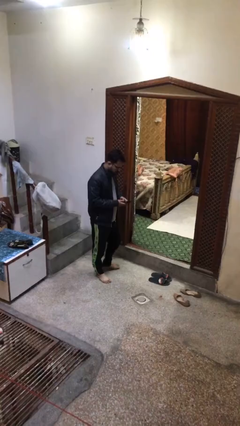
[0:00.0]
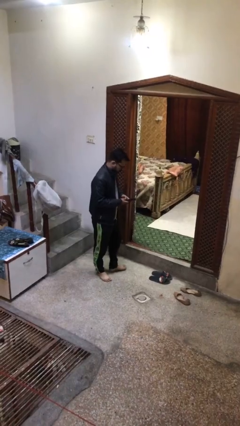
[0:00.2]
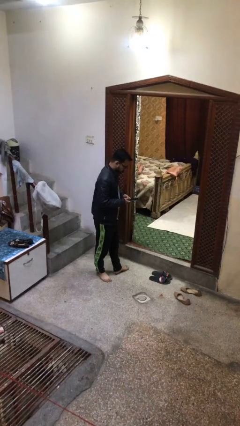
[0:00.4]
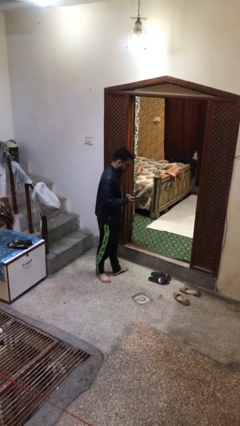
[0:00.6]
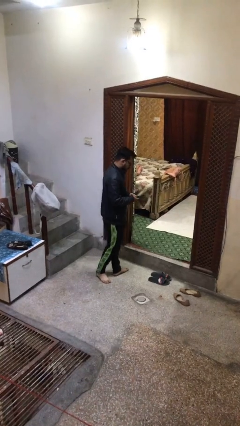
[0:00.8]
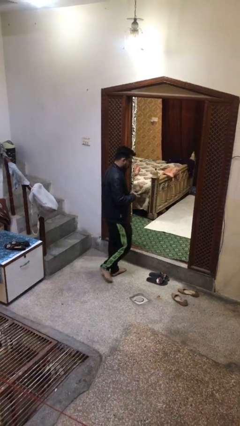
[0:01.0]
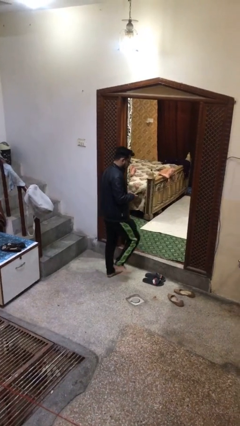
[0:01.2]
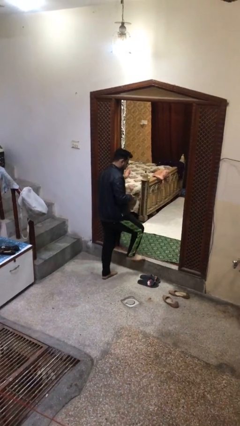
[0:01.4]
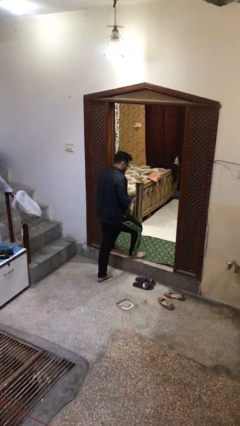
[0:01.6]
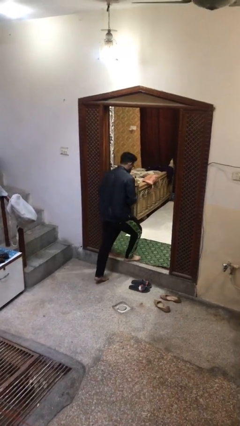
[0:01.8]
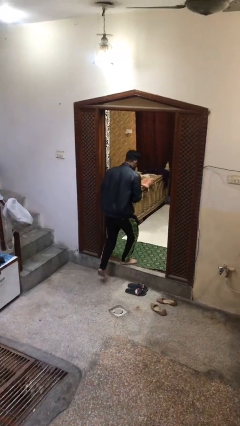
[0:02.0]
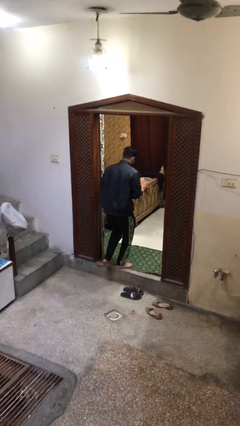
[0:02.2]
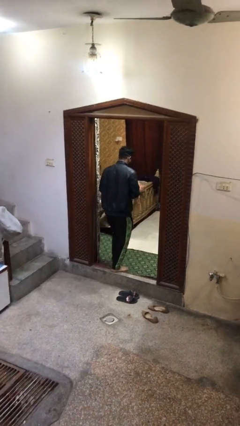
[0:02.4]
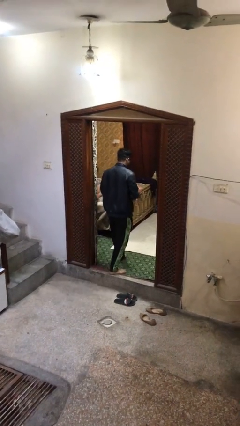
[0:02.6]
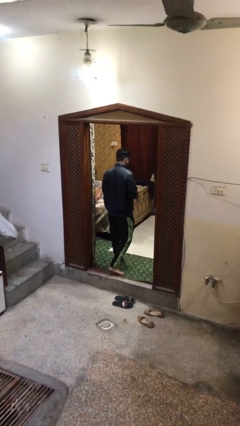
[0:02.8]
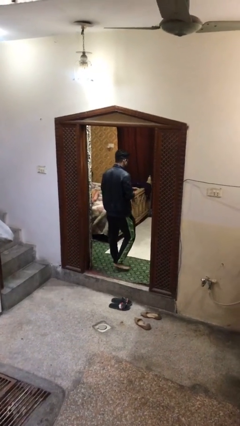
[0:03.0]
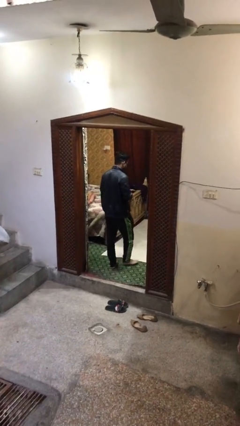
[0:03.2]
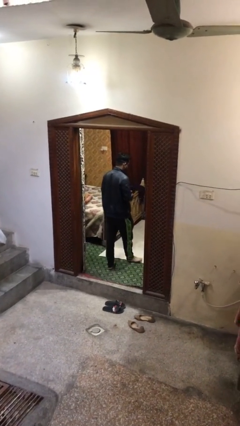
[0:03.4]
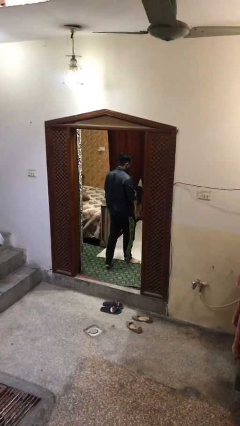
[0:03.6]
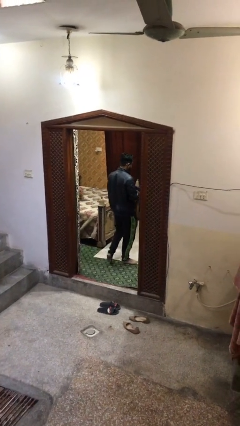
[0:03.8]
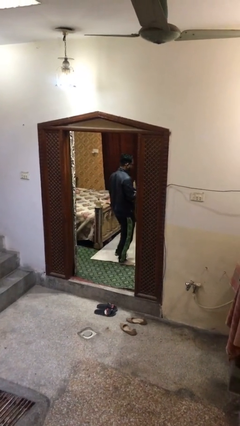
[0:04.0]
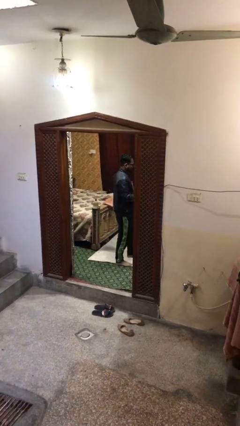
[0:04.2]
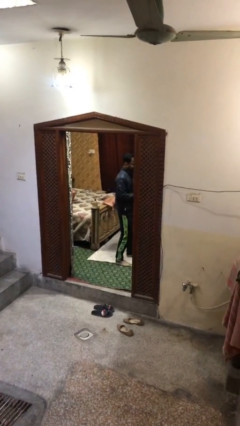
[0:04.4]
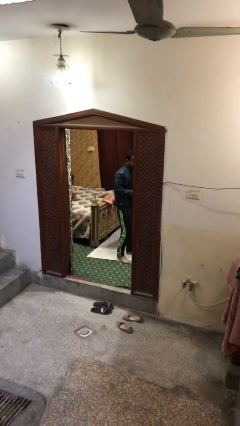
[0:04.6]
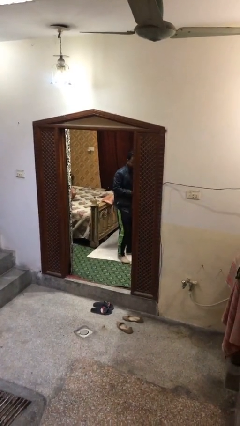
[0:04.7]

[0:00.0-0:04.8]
person exits scene through structure

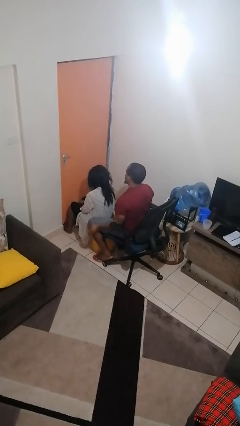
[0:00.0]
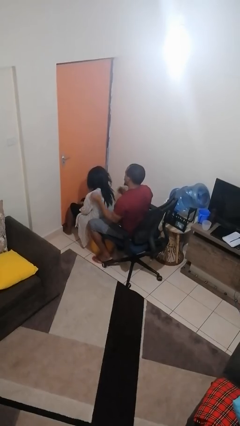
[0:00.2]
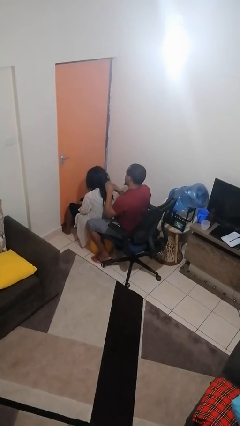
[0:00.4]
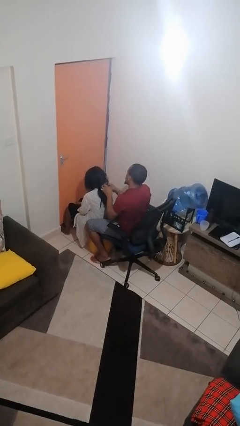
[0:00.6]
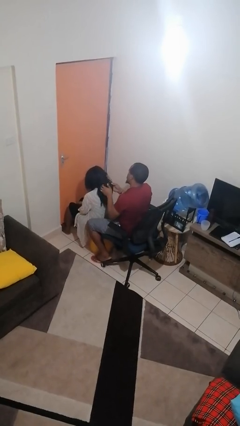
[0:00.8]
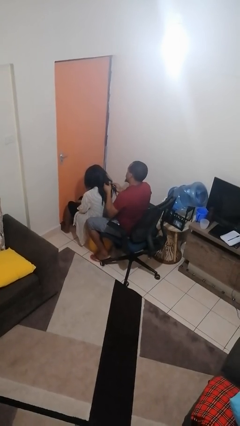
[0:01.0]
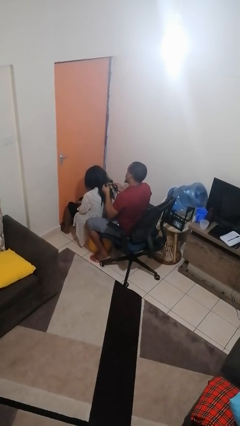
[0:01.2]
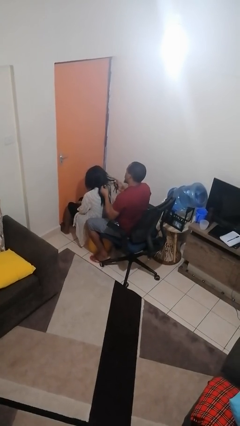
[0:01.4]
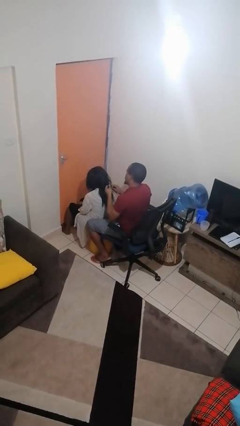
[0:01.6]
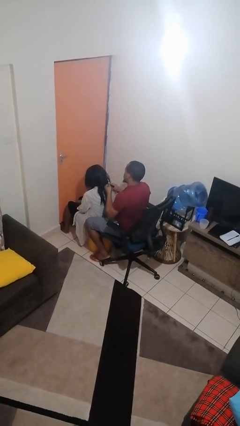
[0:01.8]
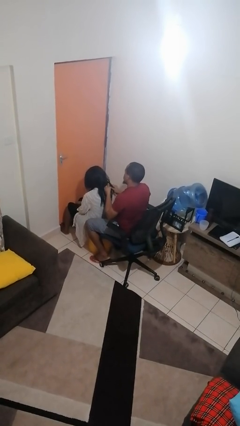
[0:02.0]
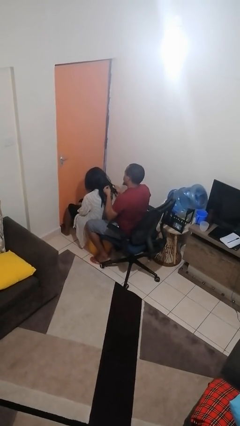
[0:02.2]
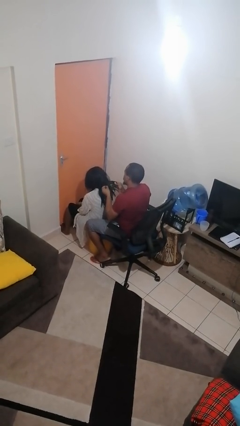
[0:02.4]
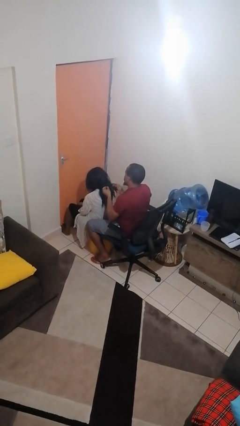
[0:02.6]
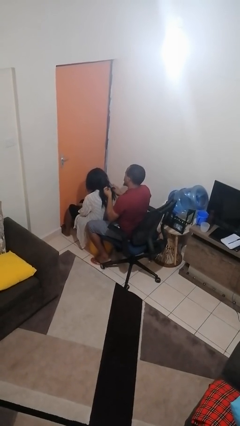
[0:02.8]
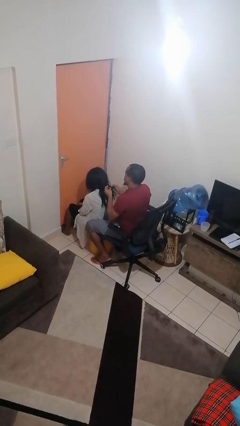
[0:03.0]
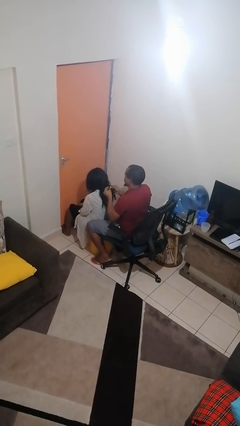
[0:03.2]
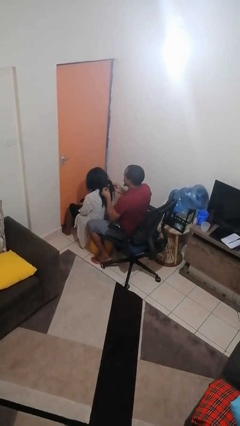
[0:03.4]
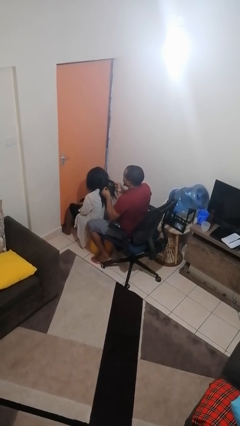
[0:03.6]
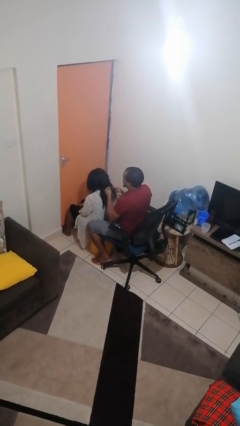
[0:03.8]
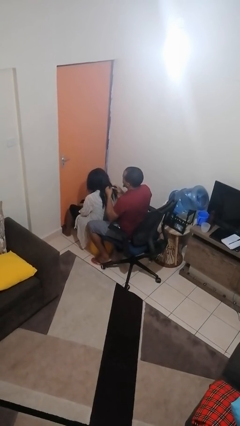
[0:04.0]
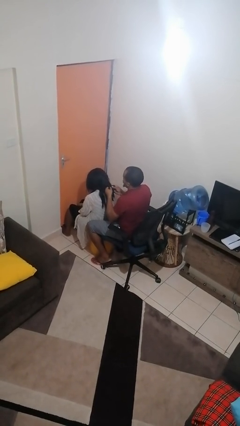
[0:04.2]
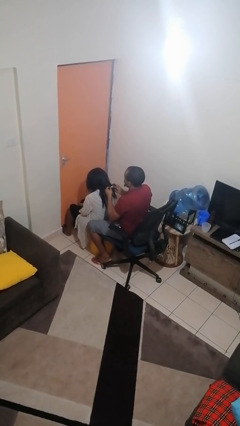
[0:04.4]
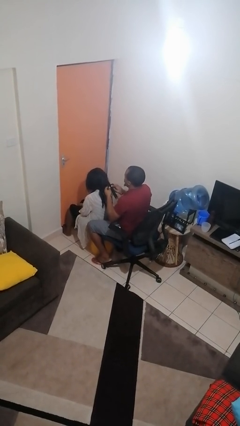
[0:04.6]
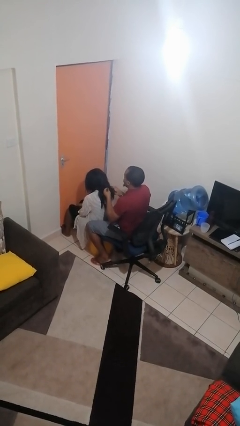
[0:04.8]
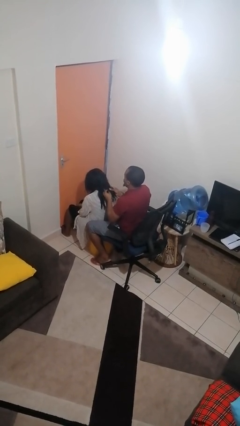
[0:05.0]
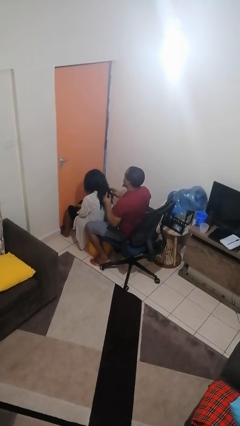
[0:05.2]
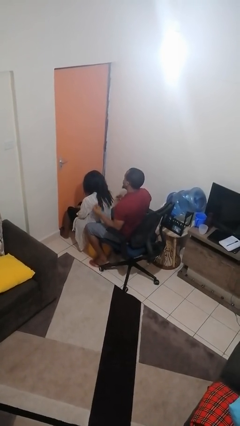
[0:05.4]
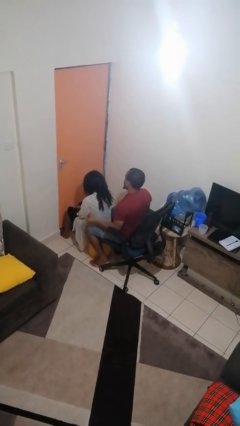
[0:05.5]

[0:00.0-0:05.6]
person braids hair of person

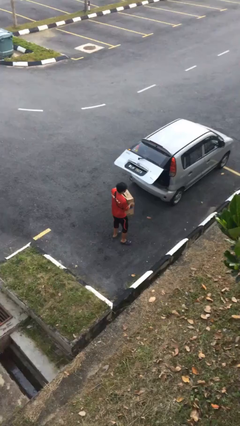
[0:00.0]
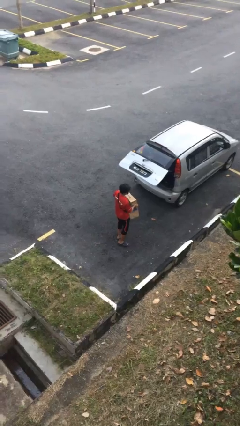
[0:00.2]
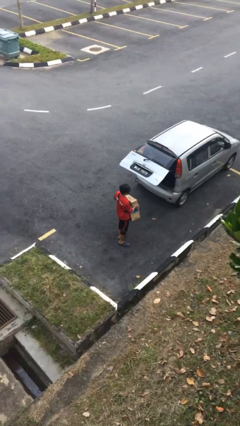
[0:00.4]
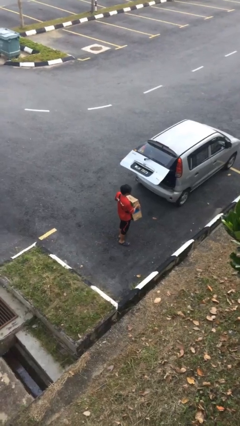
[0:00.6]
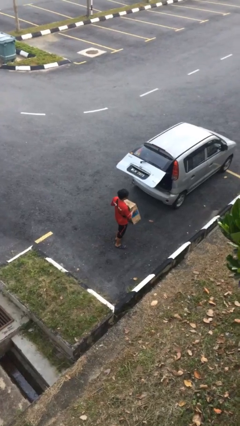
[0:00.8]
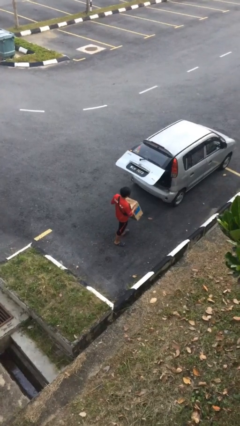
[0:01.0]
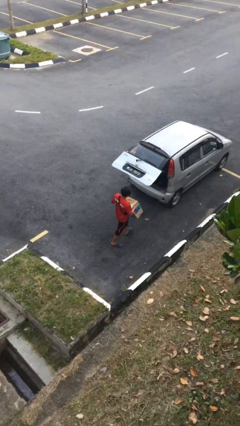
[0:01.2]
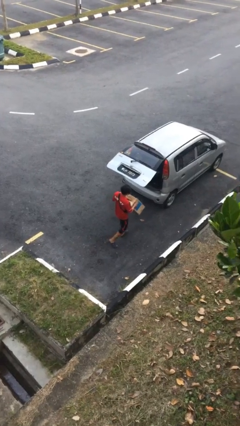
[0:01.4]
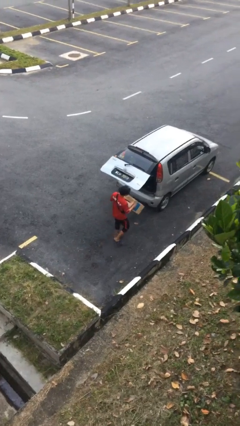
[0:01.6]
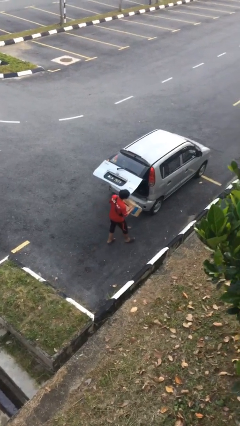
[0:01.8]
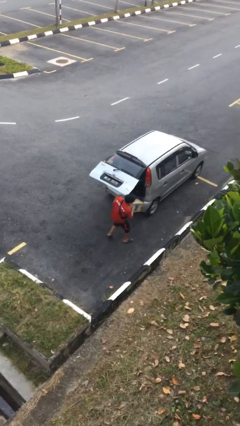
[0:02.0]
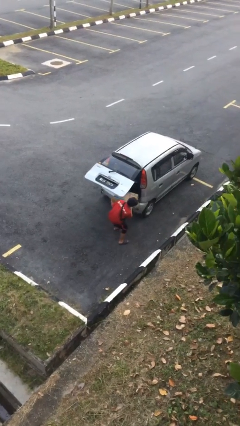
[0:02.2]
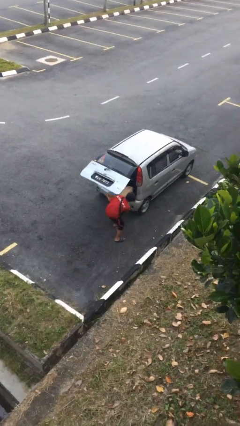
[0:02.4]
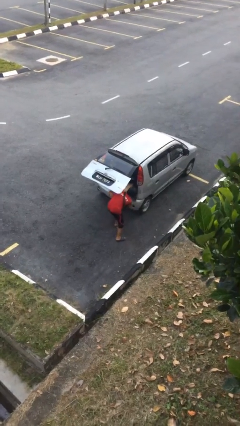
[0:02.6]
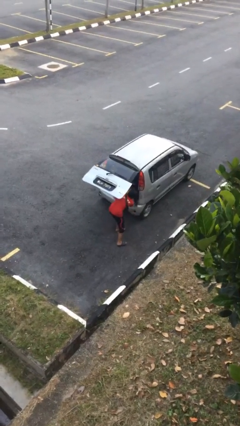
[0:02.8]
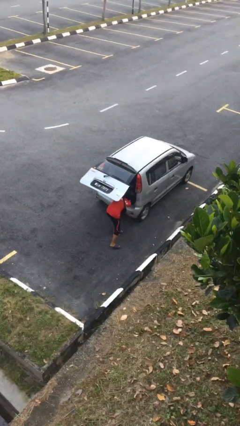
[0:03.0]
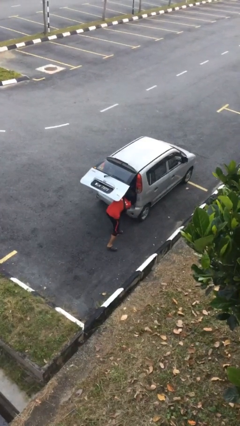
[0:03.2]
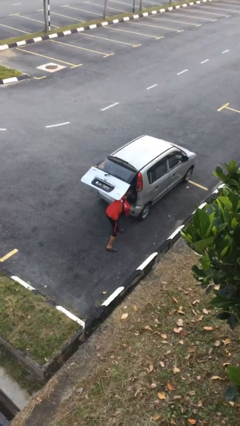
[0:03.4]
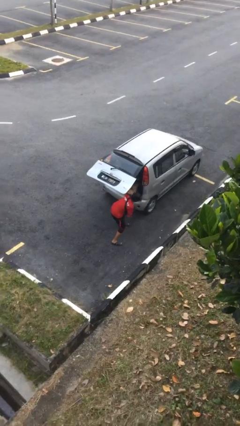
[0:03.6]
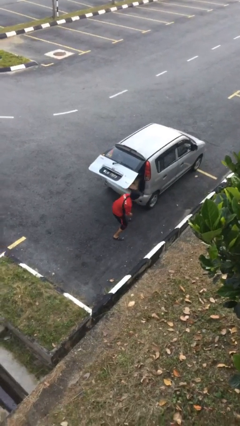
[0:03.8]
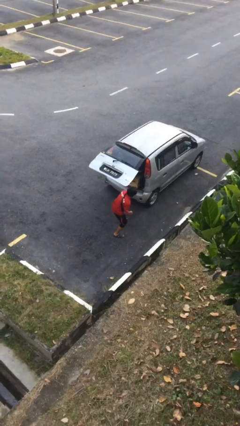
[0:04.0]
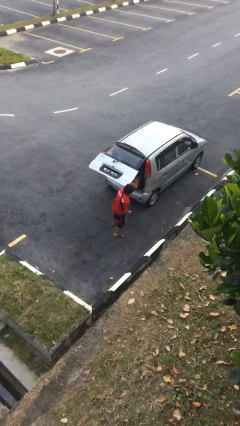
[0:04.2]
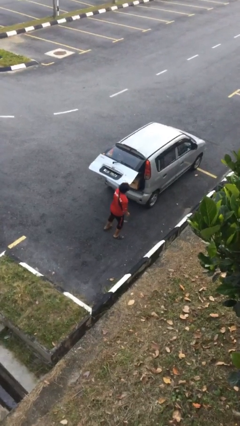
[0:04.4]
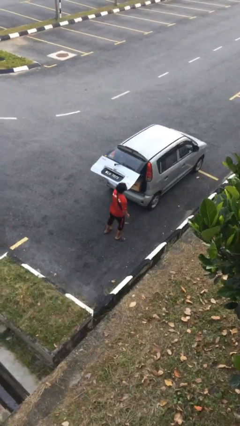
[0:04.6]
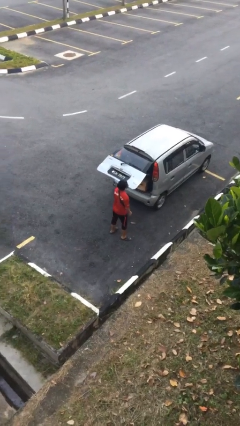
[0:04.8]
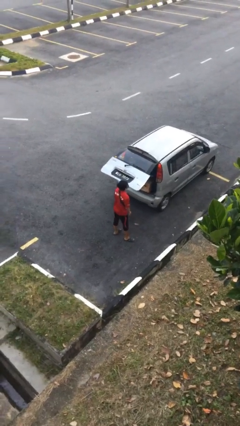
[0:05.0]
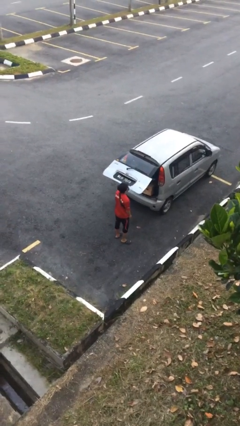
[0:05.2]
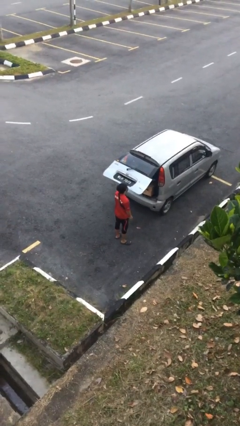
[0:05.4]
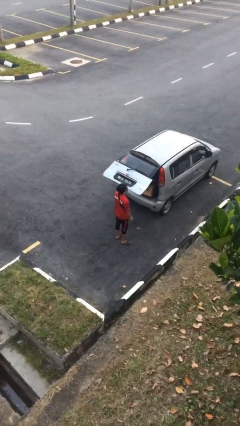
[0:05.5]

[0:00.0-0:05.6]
person loads car

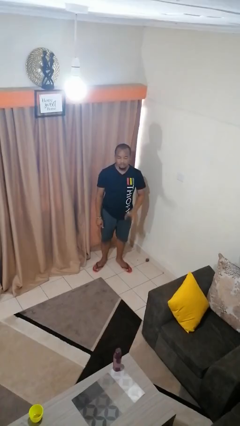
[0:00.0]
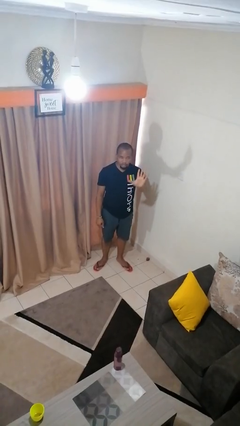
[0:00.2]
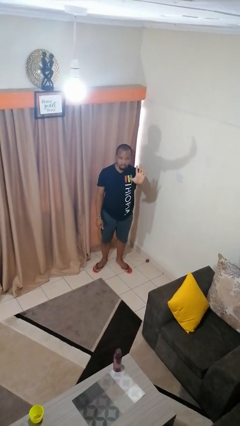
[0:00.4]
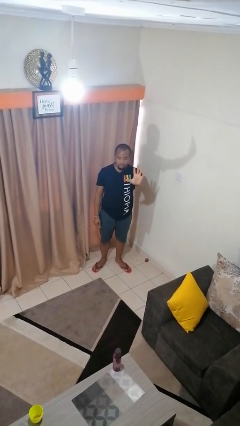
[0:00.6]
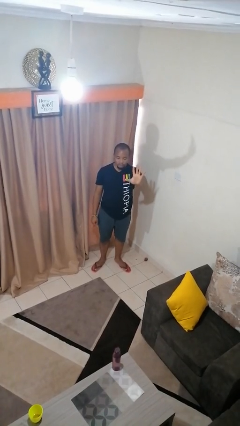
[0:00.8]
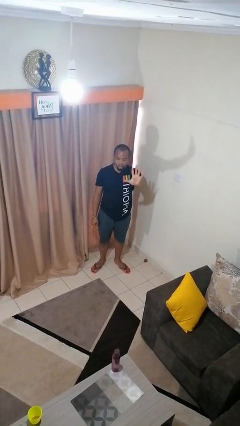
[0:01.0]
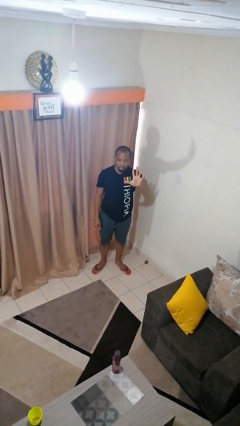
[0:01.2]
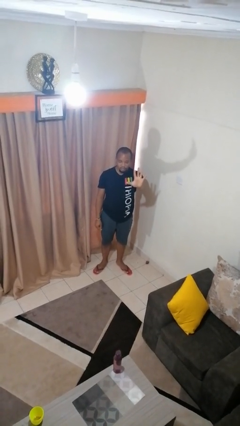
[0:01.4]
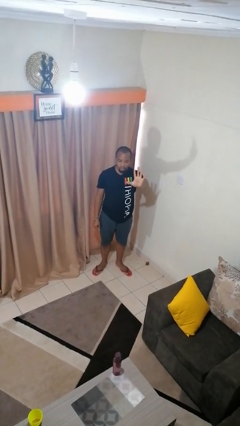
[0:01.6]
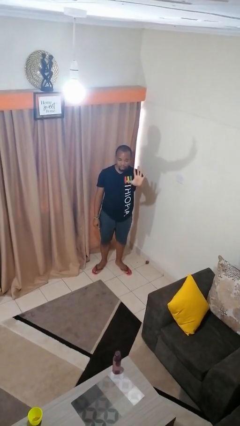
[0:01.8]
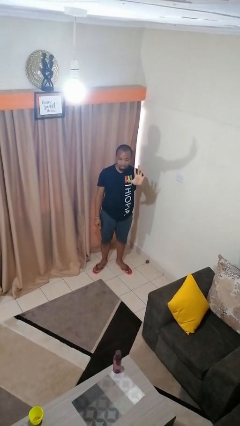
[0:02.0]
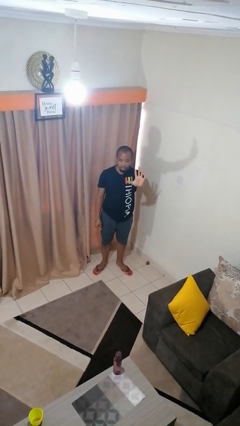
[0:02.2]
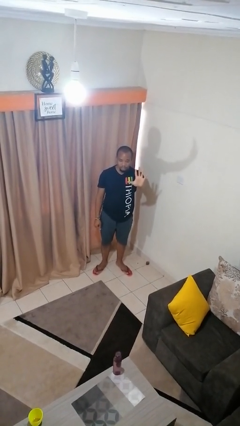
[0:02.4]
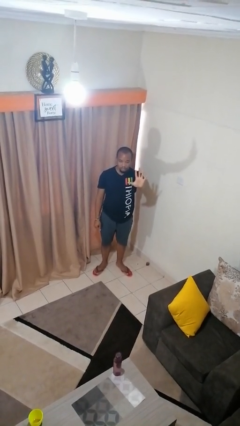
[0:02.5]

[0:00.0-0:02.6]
person gestures number five
